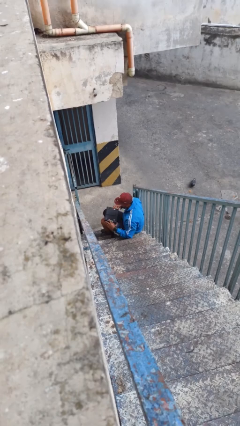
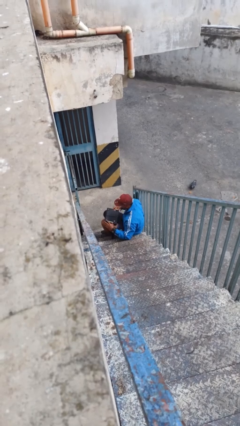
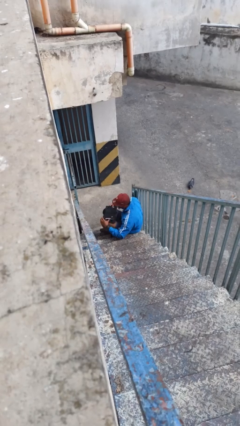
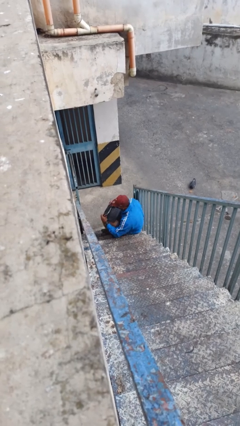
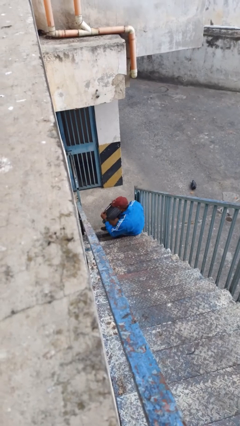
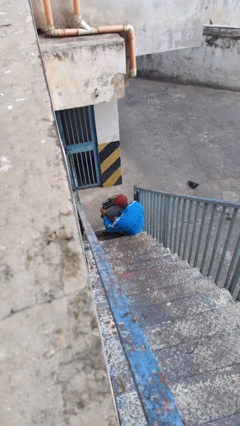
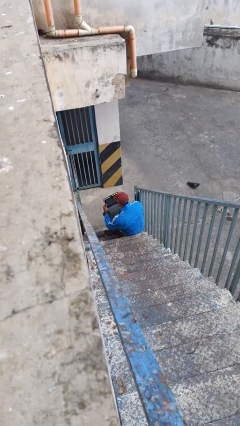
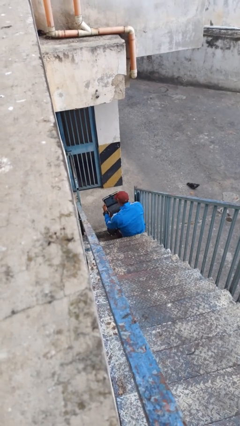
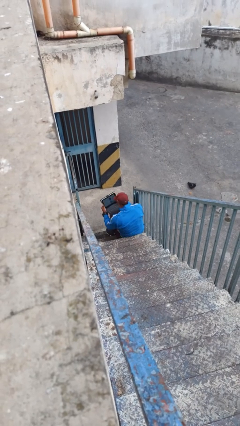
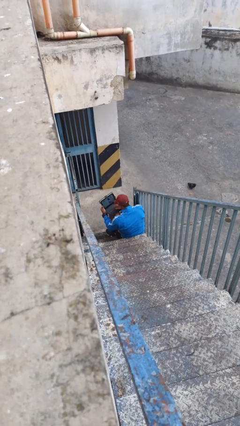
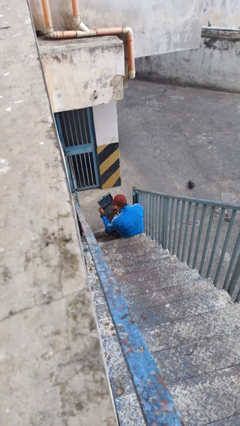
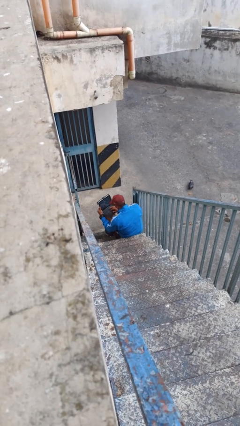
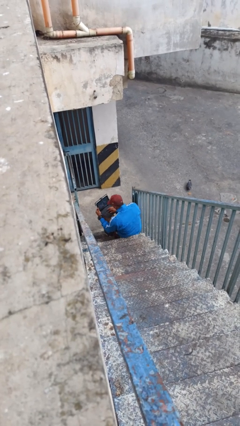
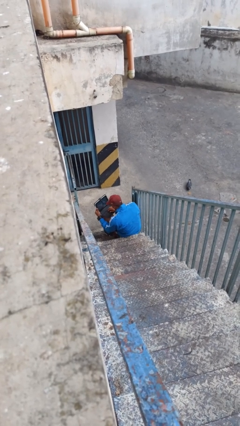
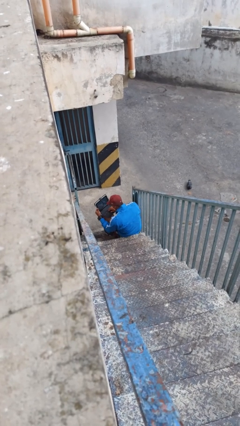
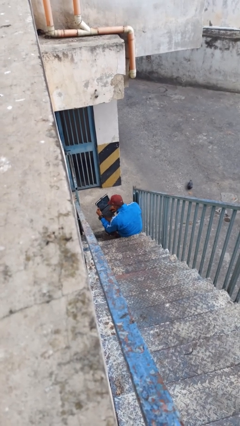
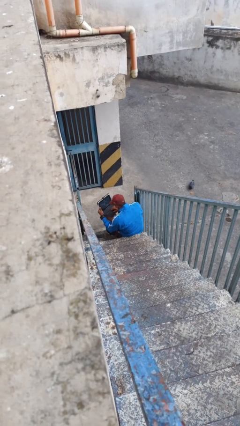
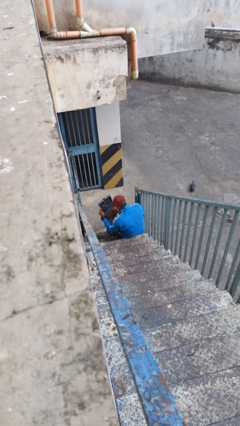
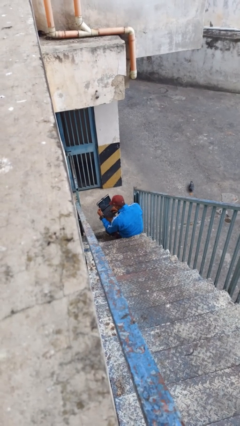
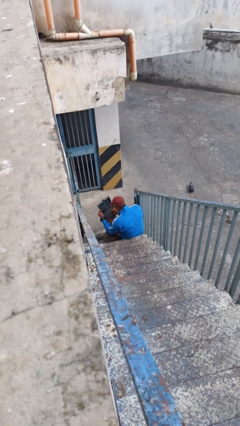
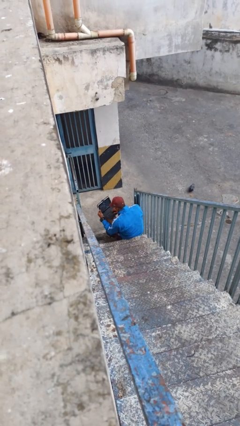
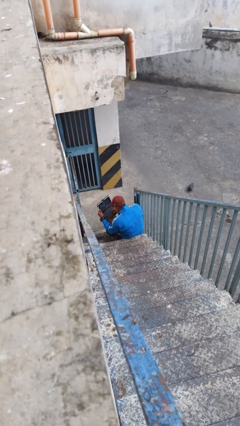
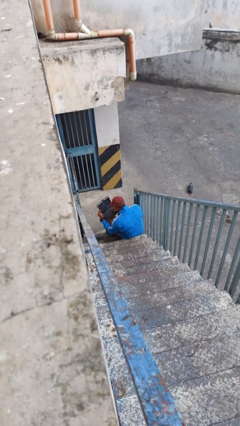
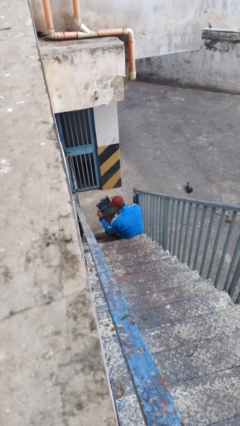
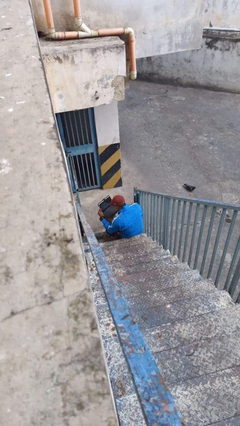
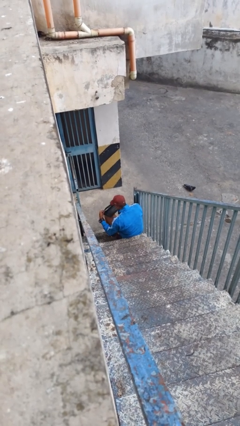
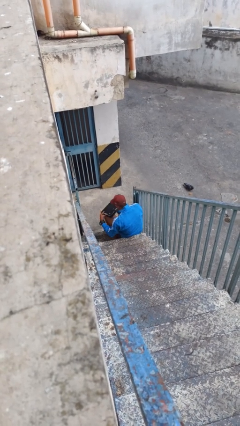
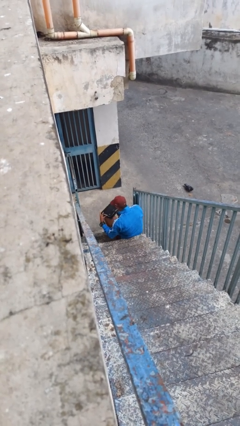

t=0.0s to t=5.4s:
person interacts with laptop

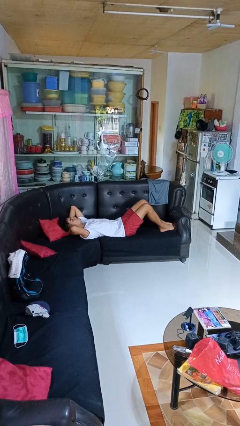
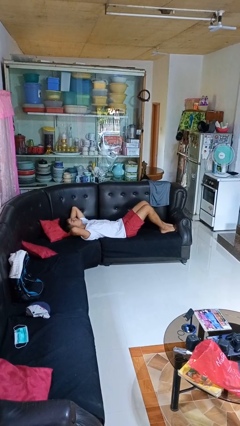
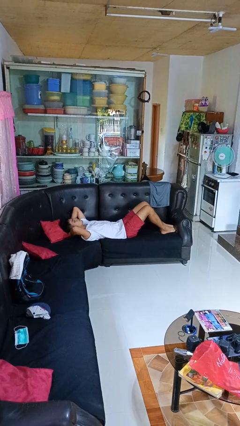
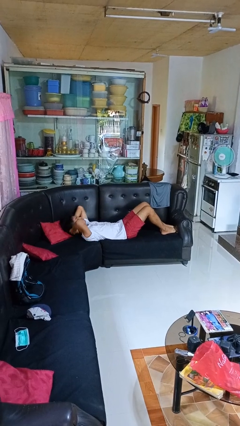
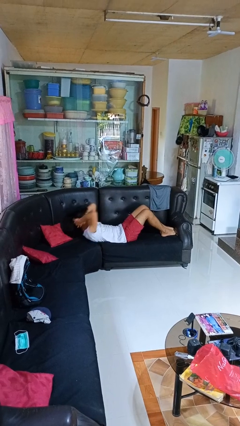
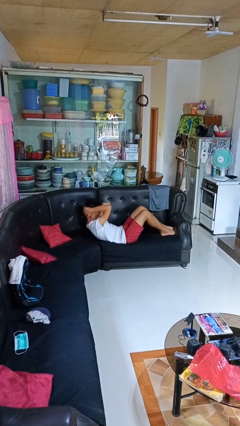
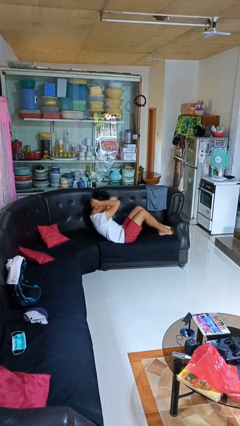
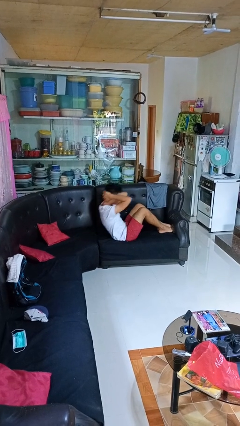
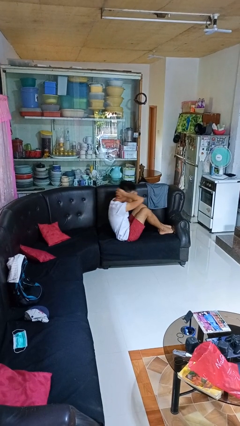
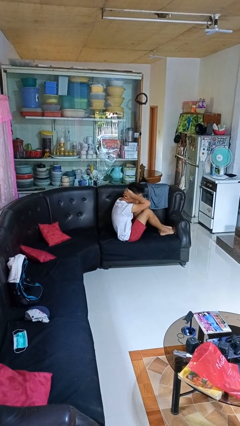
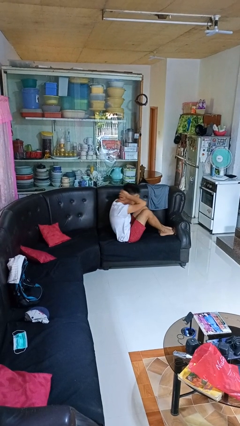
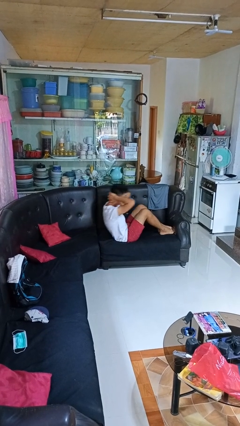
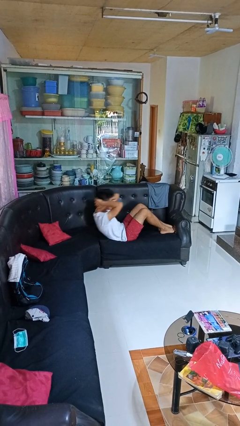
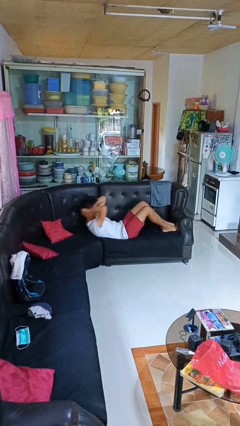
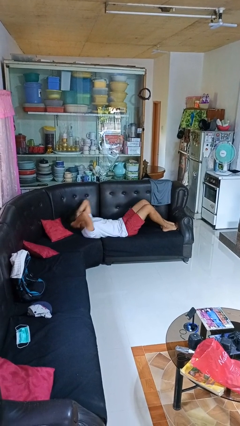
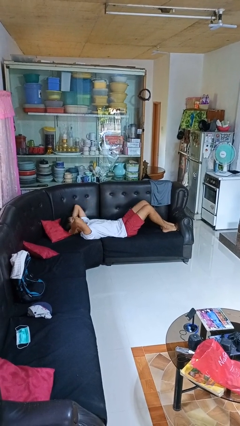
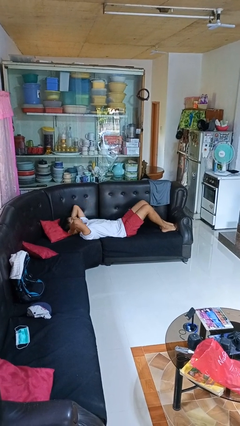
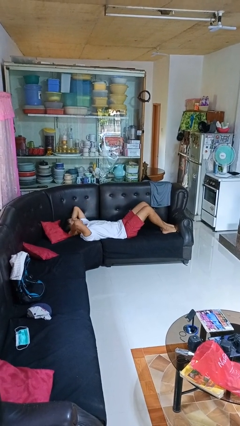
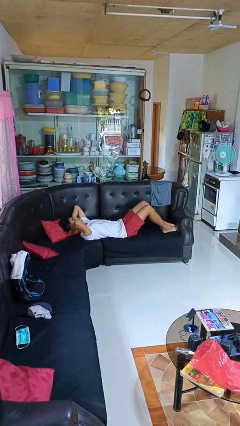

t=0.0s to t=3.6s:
person exercises with situp

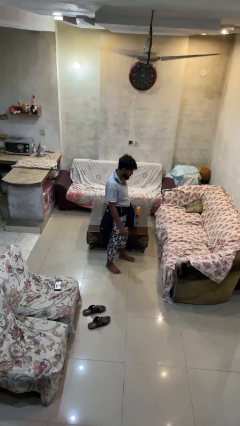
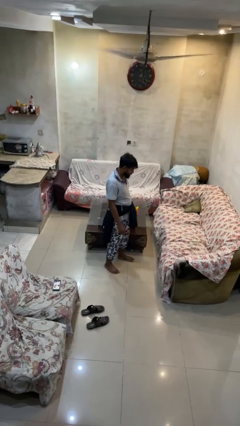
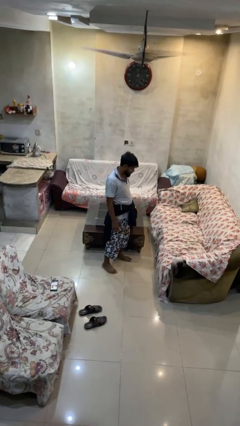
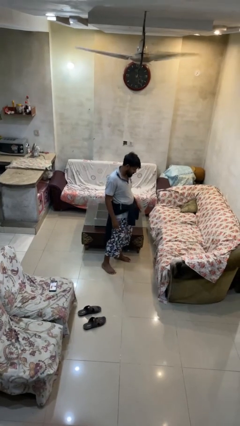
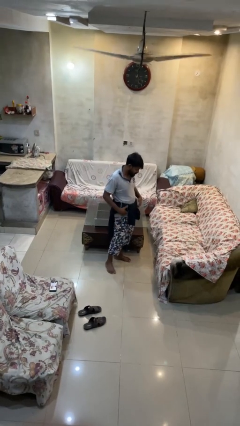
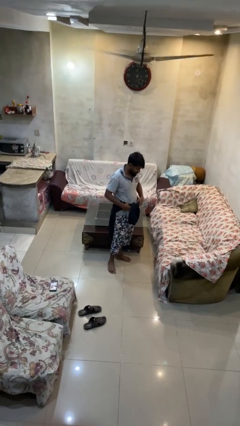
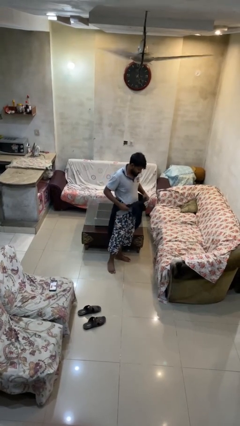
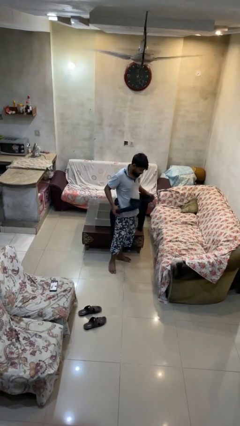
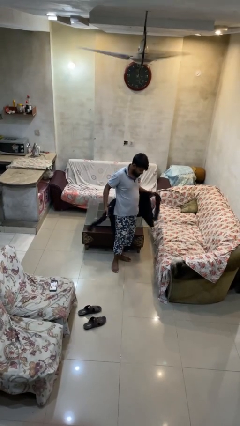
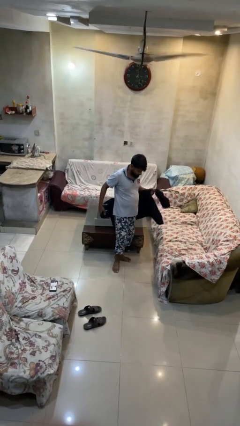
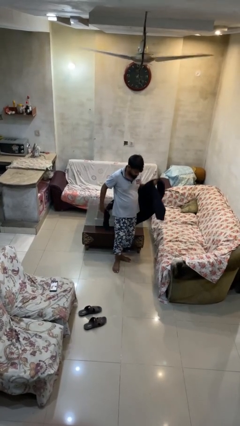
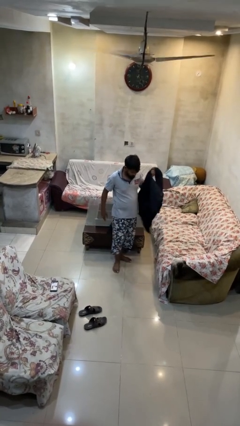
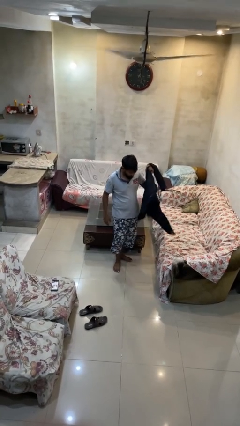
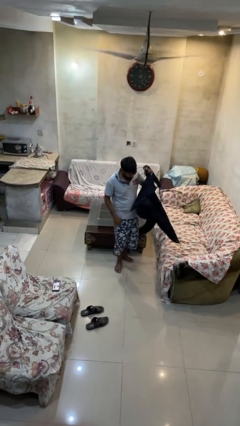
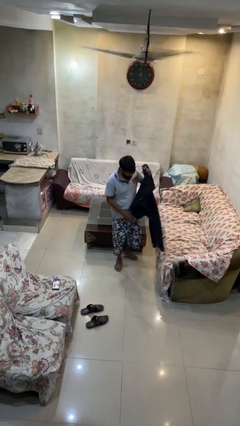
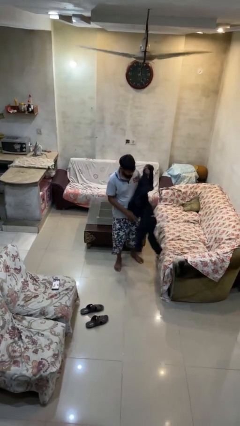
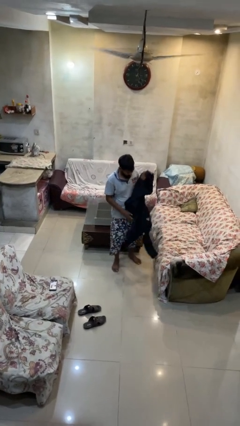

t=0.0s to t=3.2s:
person unties jacket around waist

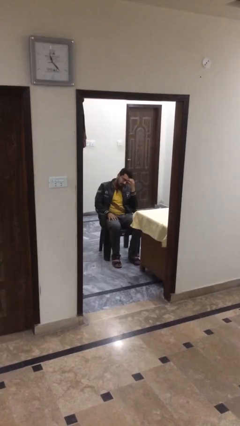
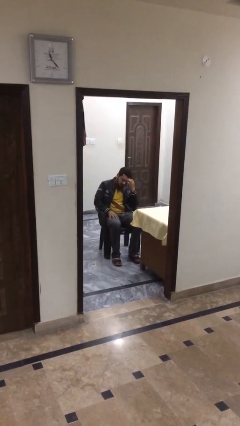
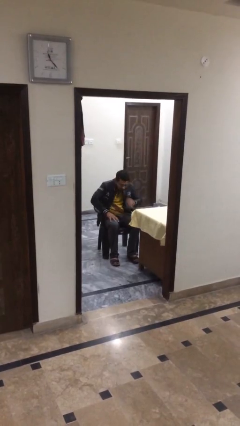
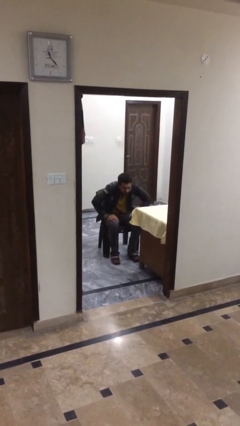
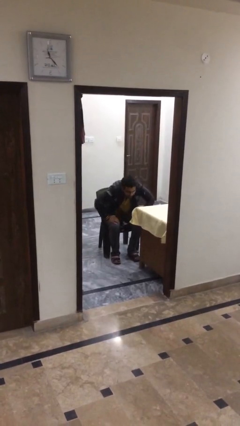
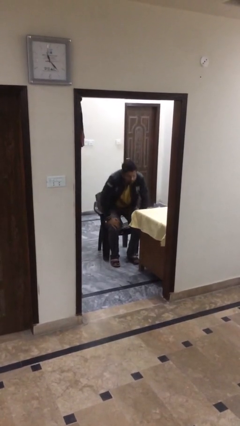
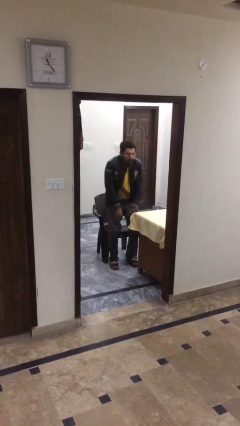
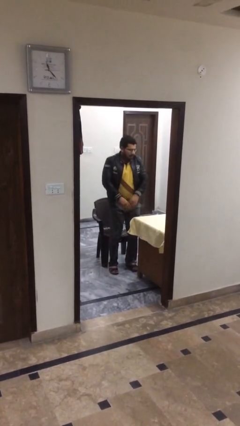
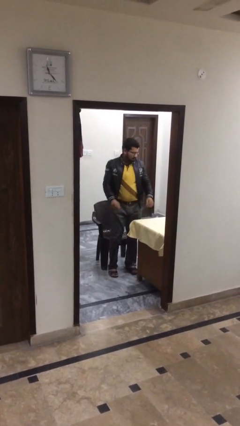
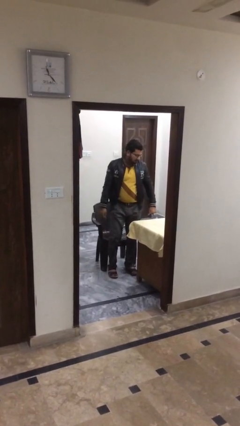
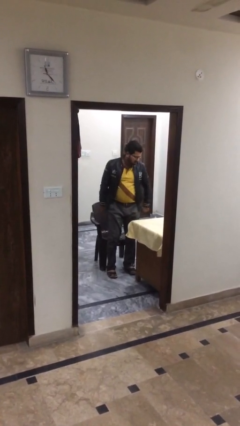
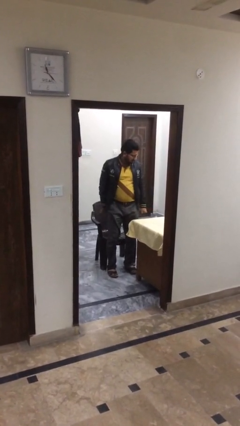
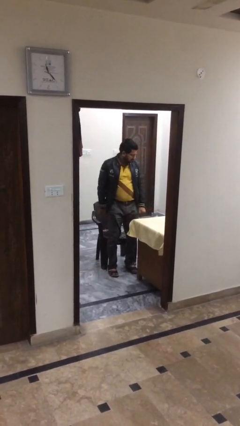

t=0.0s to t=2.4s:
person stands up

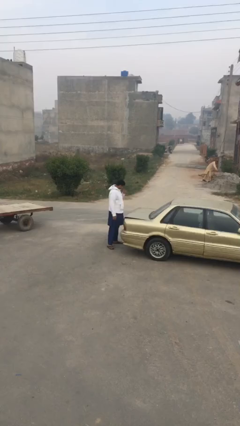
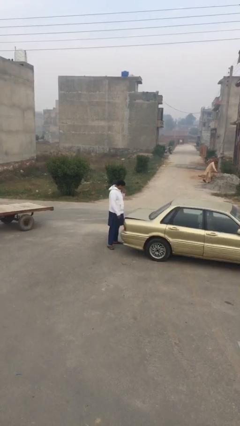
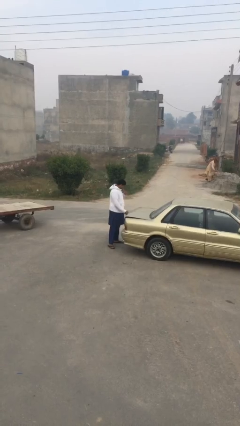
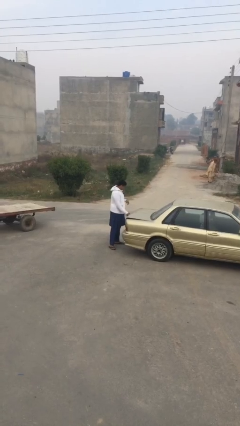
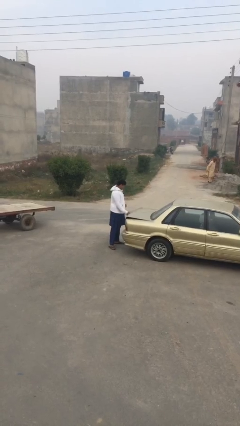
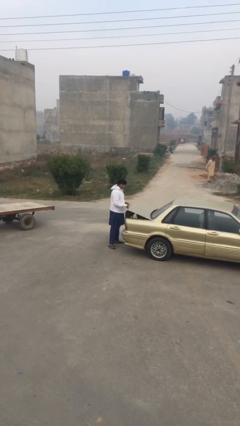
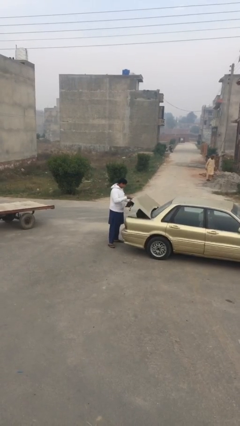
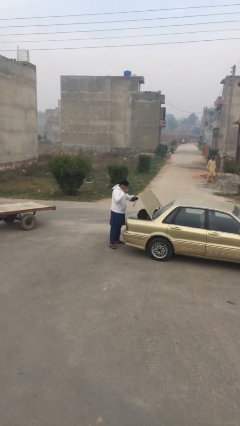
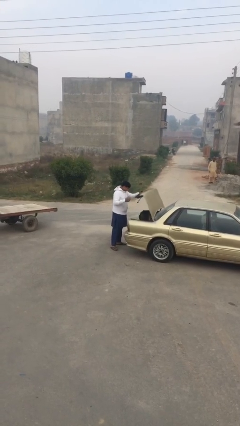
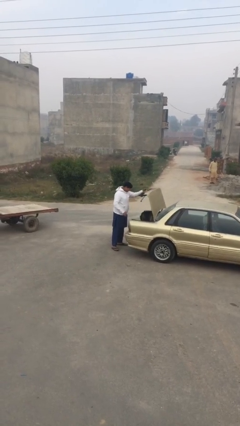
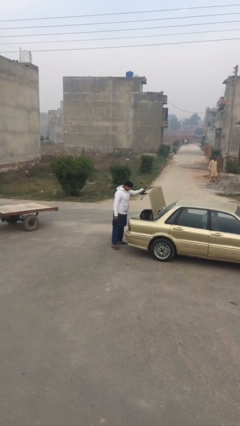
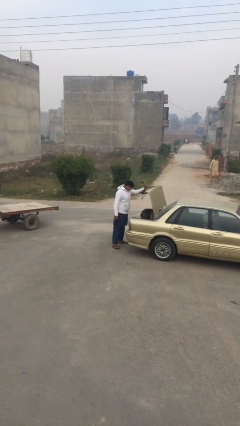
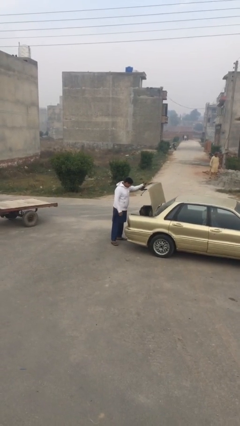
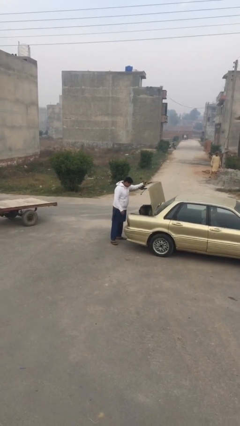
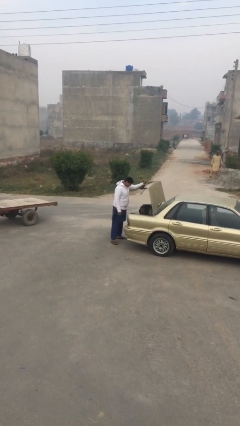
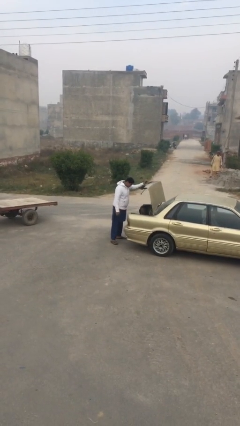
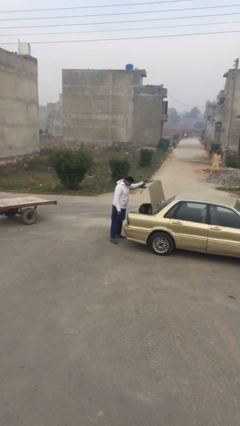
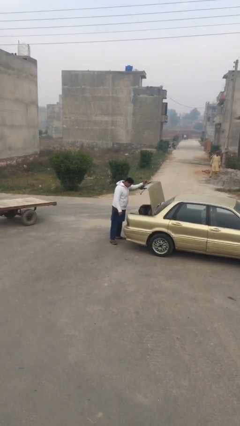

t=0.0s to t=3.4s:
person opens car trunk
